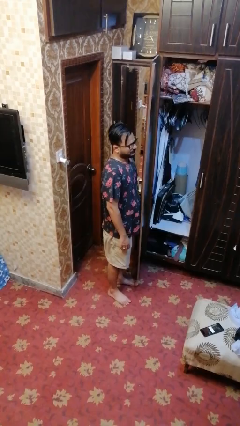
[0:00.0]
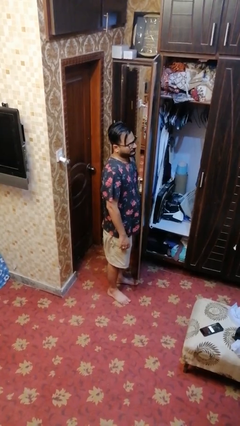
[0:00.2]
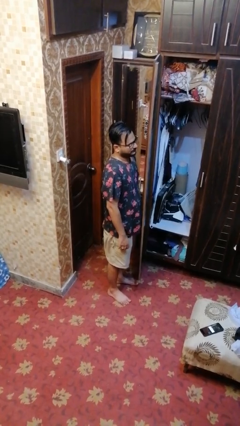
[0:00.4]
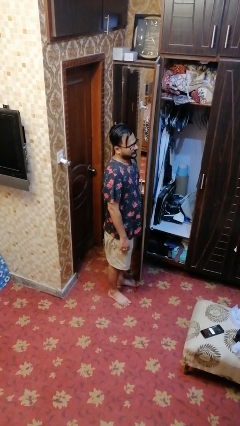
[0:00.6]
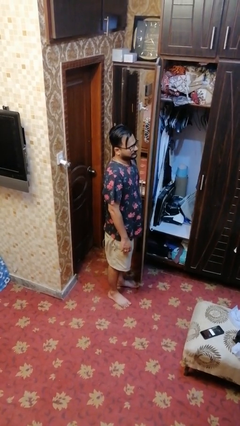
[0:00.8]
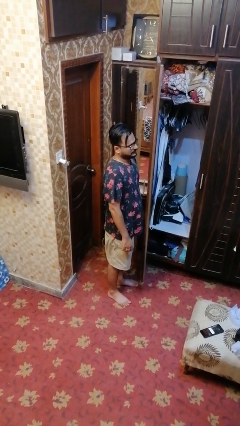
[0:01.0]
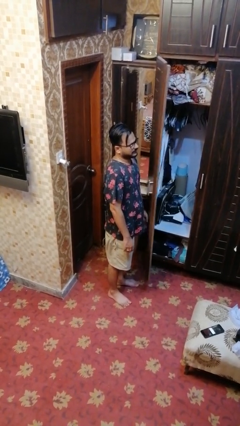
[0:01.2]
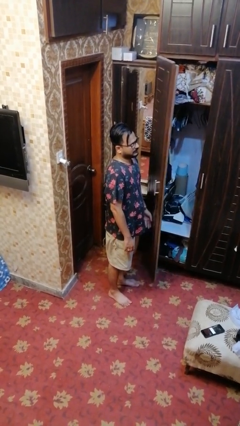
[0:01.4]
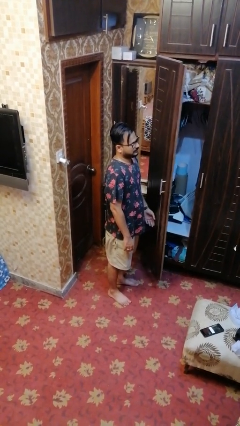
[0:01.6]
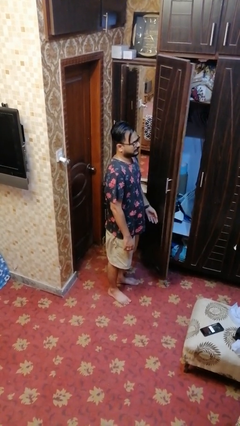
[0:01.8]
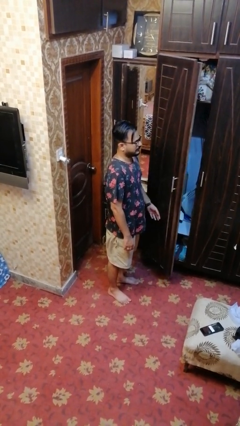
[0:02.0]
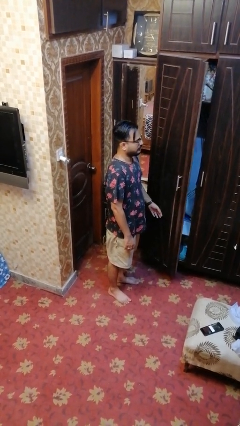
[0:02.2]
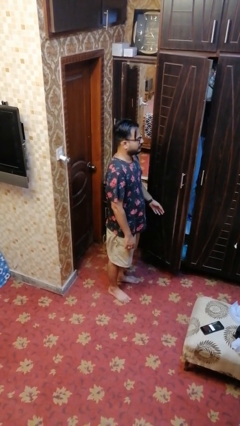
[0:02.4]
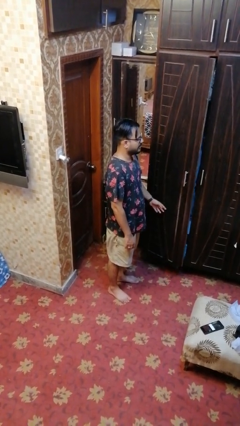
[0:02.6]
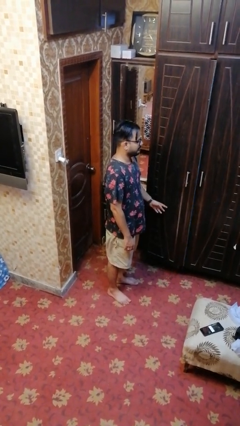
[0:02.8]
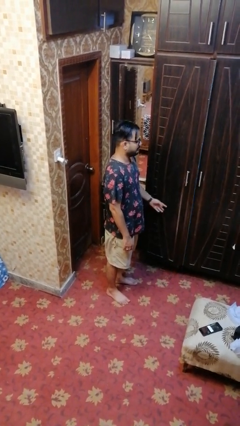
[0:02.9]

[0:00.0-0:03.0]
person closes closet door

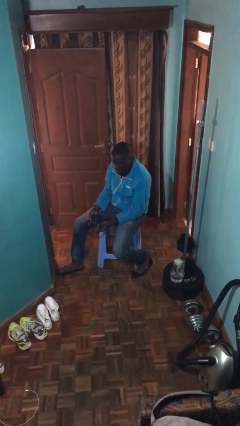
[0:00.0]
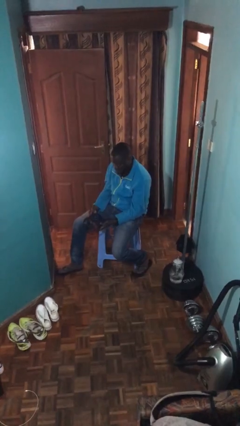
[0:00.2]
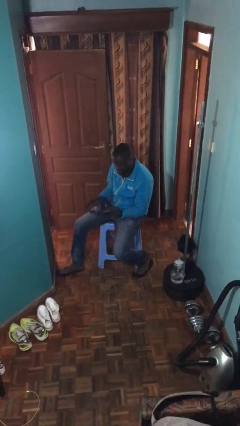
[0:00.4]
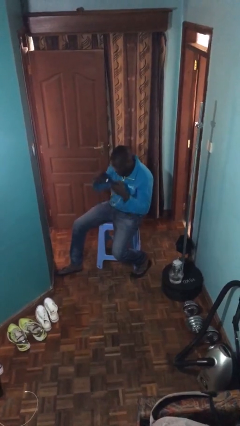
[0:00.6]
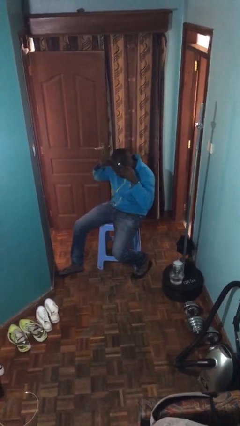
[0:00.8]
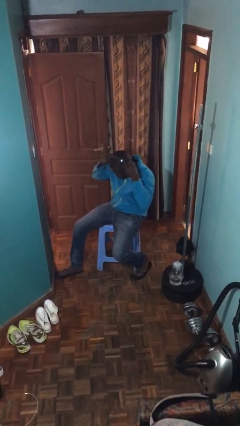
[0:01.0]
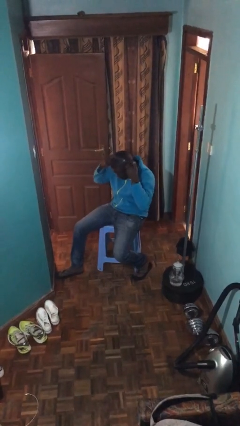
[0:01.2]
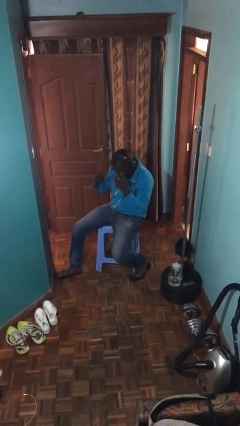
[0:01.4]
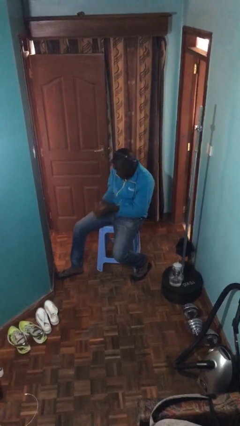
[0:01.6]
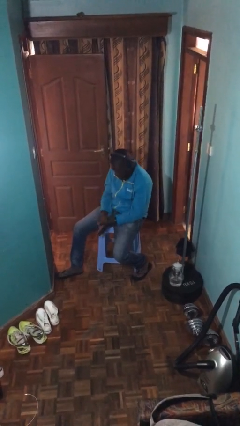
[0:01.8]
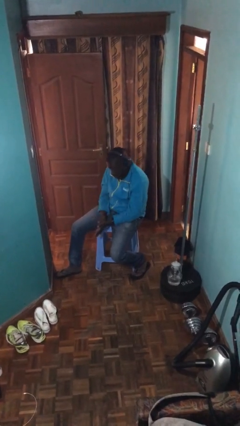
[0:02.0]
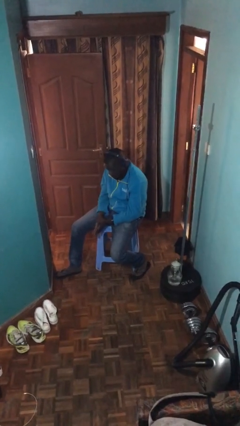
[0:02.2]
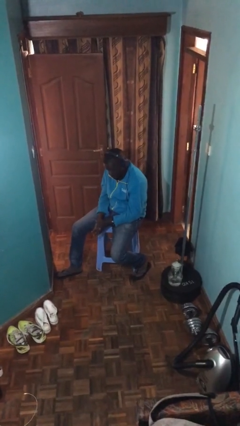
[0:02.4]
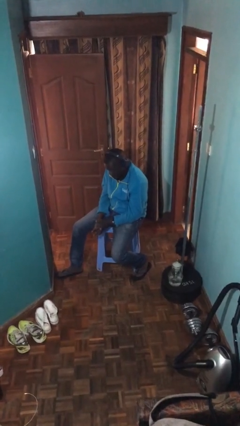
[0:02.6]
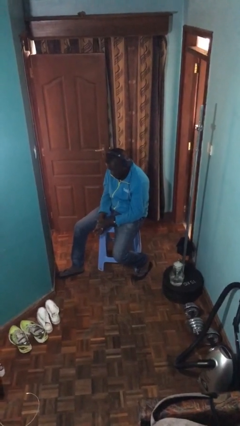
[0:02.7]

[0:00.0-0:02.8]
person puts on headphones

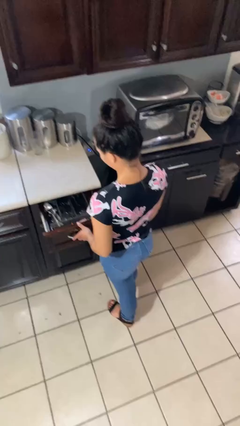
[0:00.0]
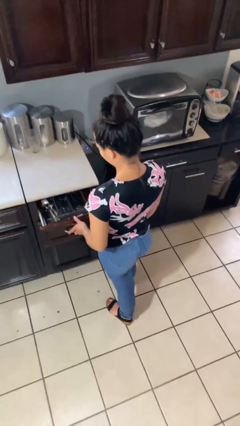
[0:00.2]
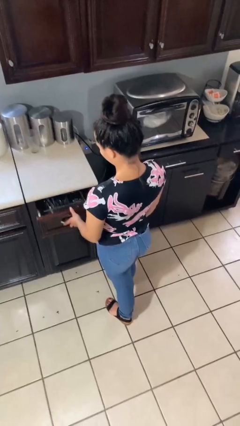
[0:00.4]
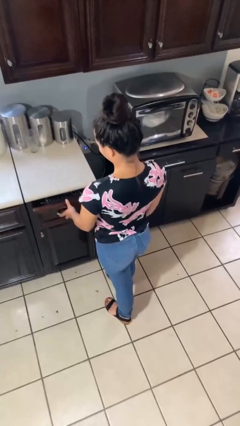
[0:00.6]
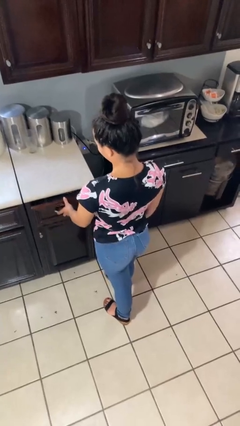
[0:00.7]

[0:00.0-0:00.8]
person closes kitchen drawer

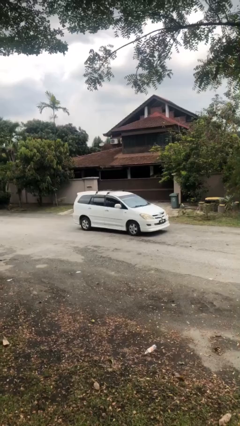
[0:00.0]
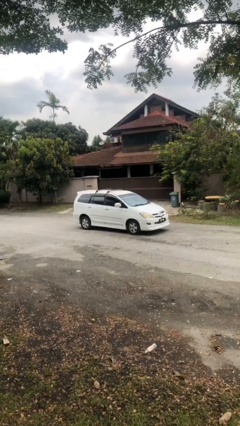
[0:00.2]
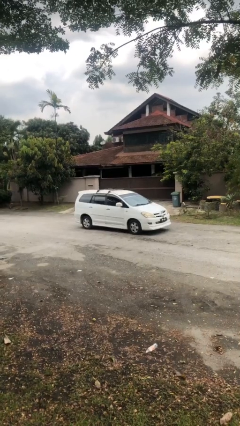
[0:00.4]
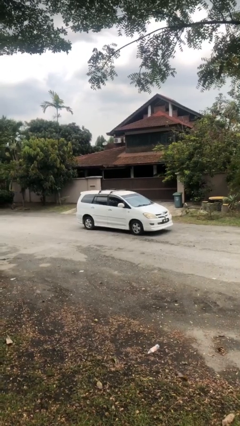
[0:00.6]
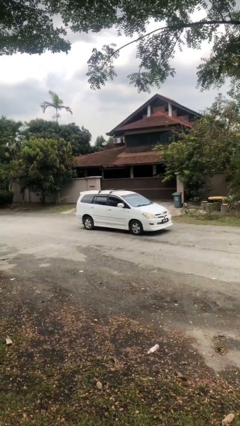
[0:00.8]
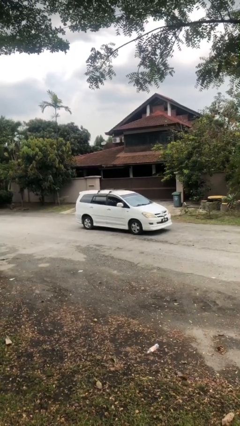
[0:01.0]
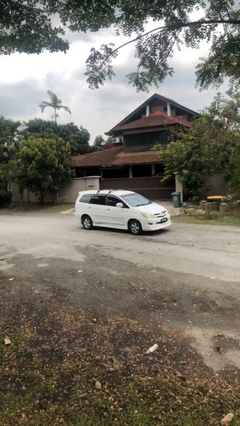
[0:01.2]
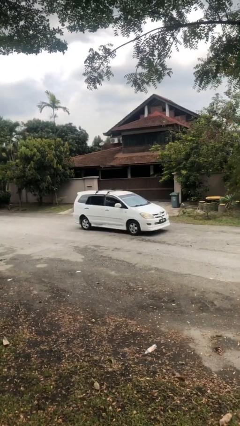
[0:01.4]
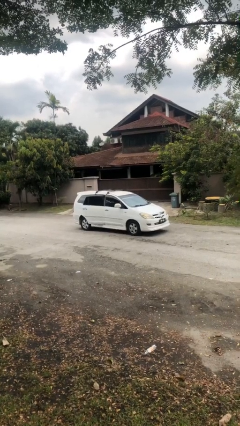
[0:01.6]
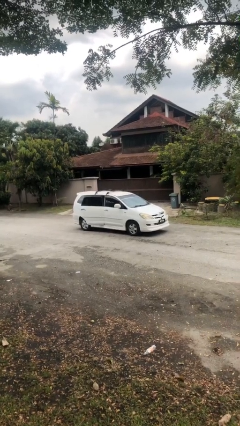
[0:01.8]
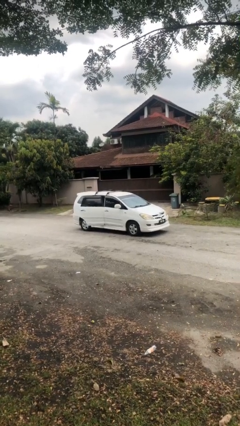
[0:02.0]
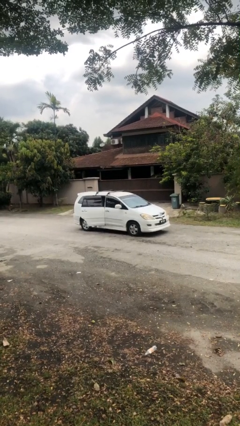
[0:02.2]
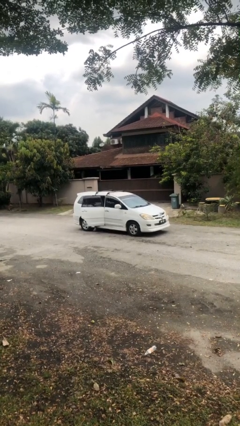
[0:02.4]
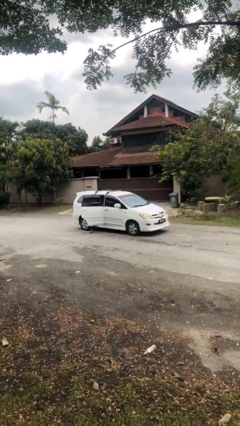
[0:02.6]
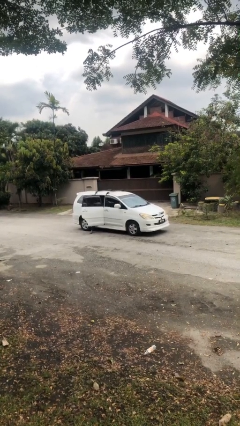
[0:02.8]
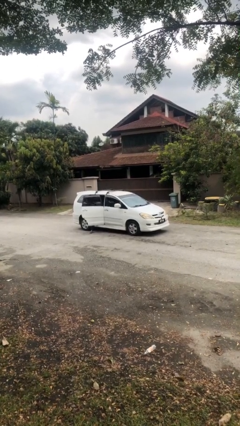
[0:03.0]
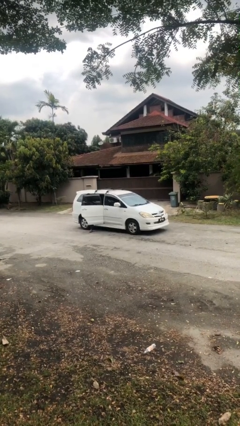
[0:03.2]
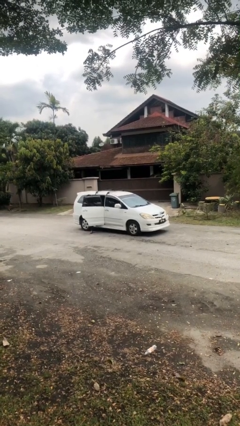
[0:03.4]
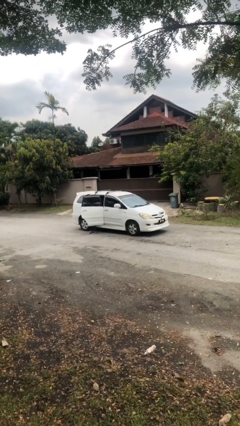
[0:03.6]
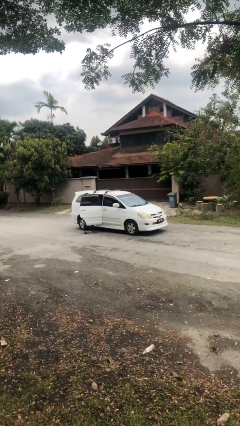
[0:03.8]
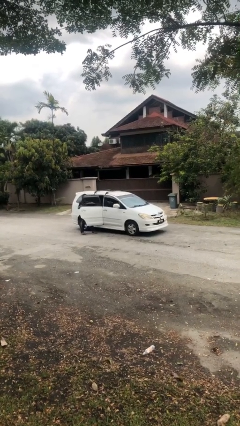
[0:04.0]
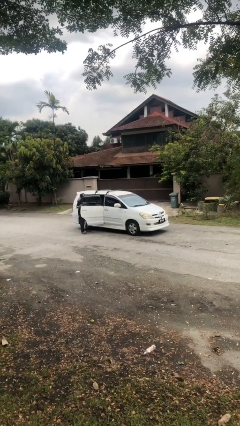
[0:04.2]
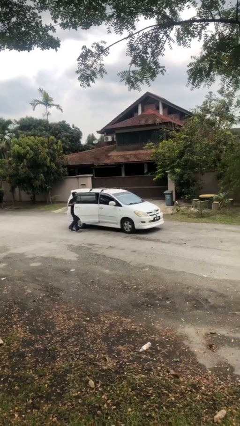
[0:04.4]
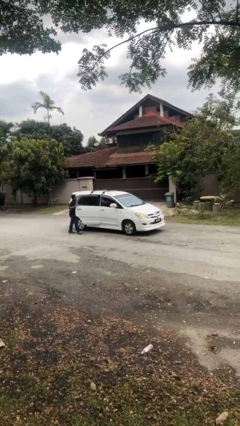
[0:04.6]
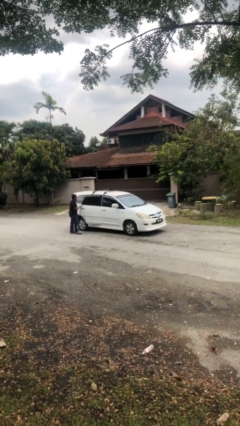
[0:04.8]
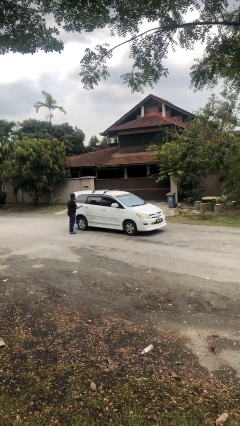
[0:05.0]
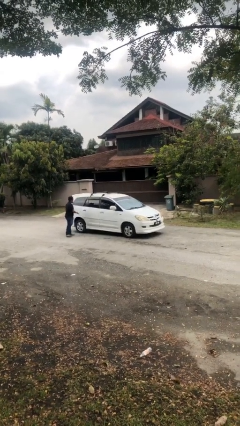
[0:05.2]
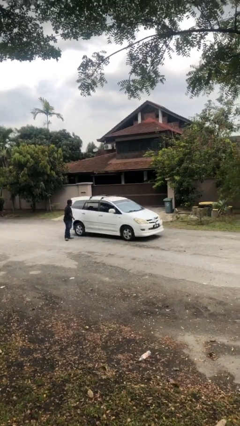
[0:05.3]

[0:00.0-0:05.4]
car drops off person

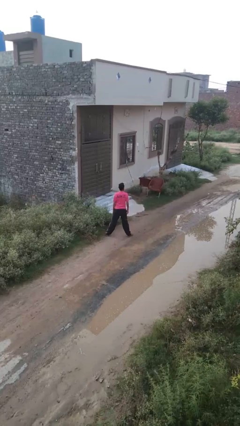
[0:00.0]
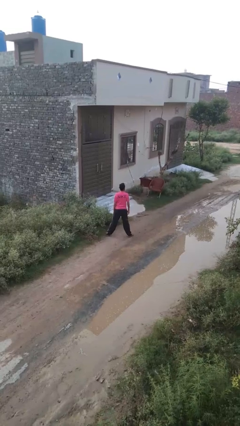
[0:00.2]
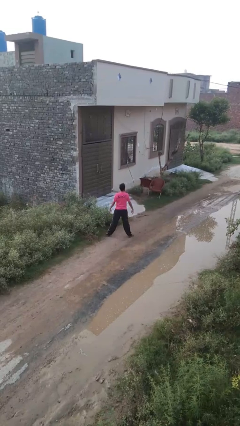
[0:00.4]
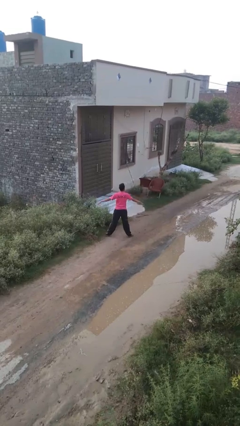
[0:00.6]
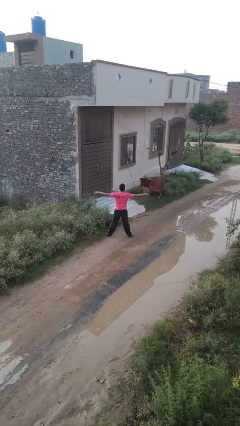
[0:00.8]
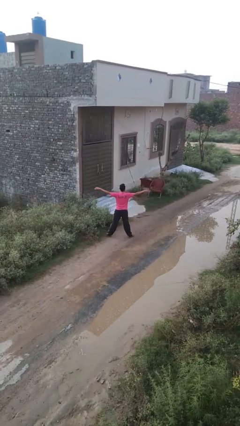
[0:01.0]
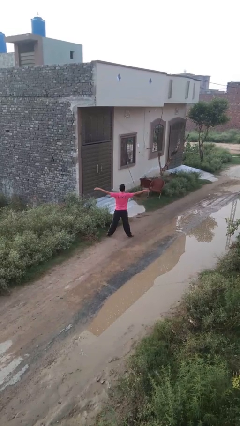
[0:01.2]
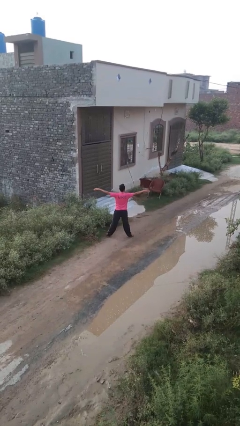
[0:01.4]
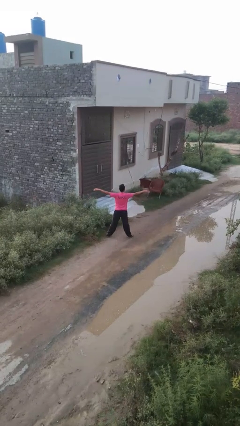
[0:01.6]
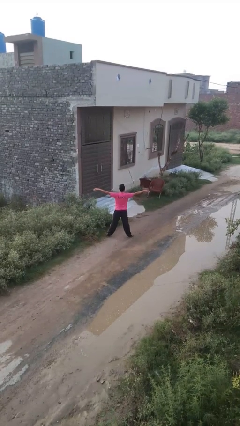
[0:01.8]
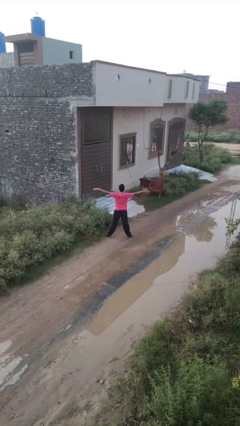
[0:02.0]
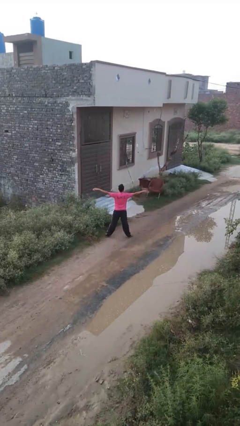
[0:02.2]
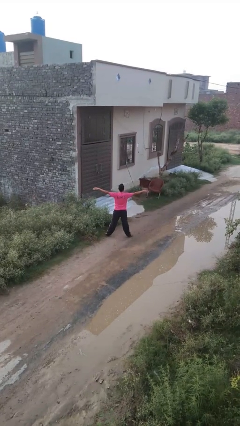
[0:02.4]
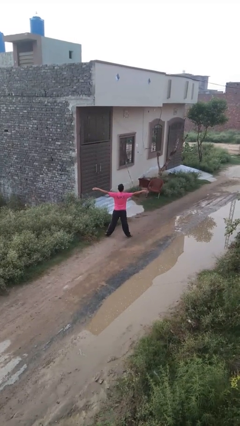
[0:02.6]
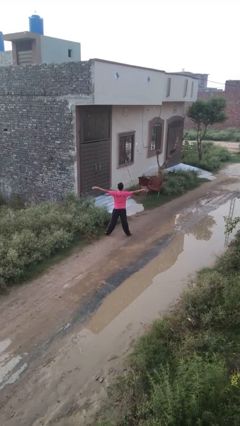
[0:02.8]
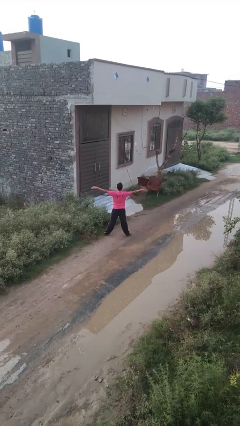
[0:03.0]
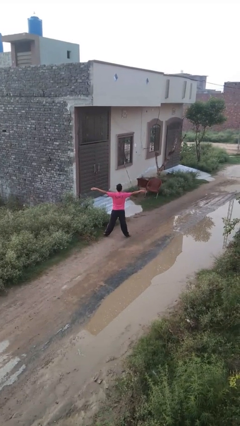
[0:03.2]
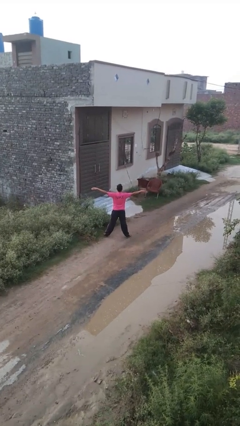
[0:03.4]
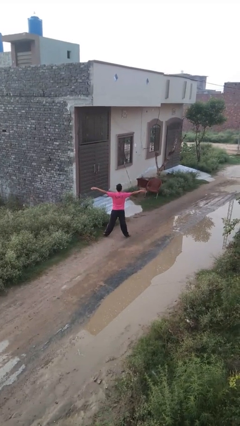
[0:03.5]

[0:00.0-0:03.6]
person stretches arms to side

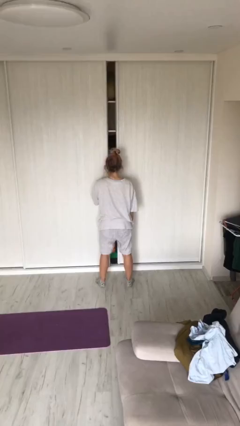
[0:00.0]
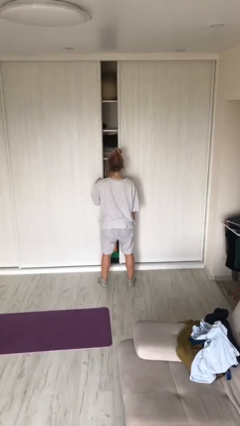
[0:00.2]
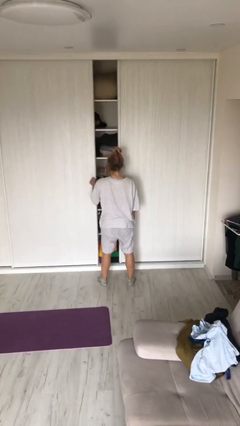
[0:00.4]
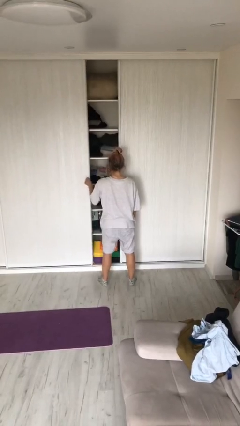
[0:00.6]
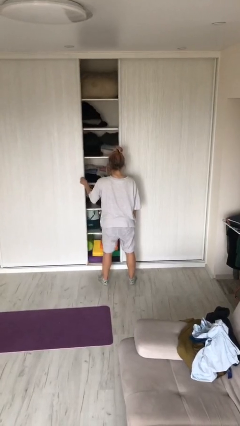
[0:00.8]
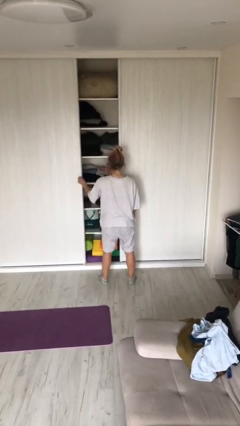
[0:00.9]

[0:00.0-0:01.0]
person opens sliding door

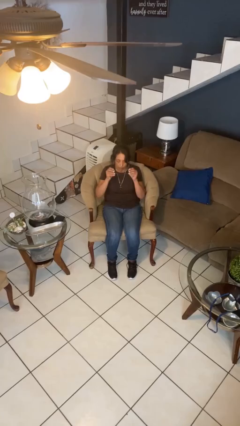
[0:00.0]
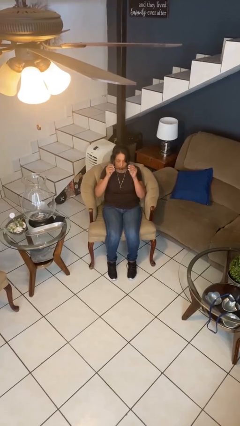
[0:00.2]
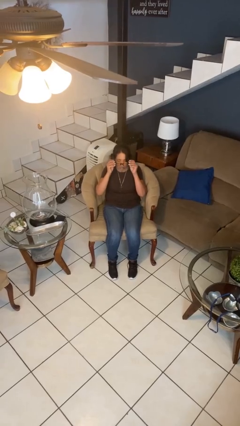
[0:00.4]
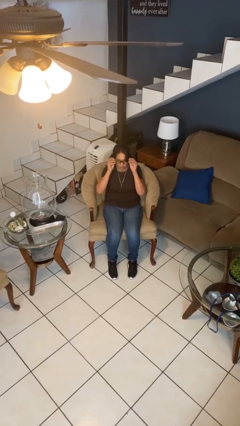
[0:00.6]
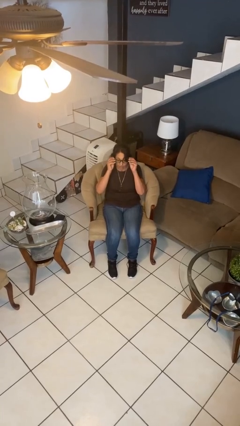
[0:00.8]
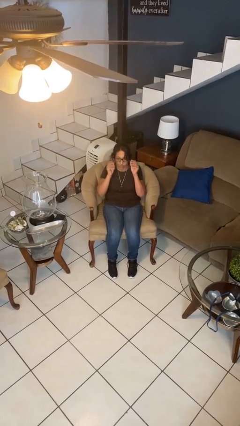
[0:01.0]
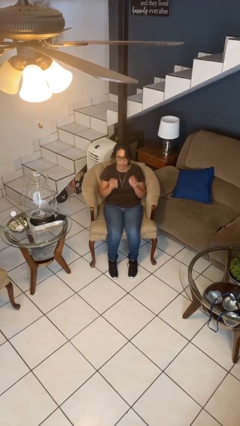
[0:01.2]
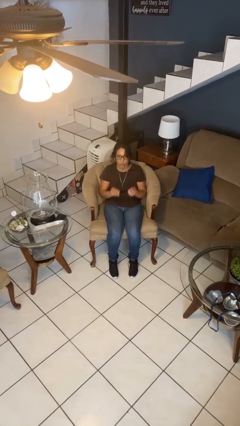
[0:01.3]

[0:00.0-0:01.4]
person puts on glasses
